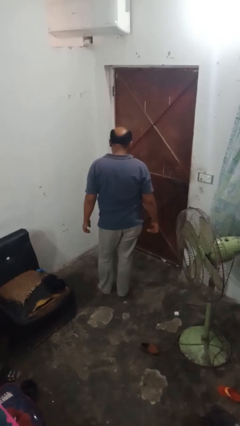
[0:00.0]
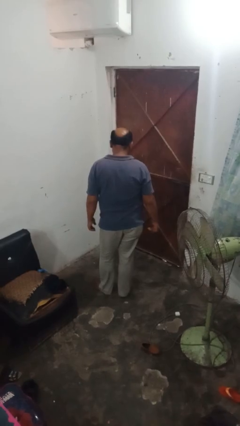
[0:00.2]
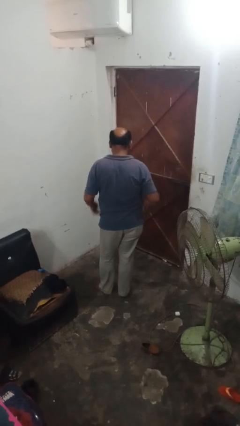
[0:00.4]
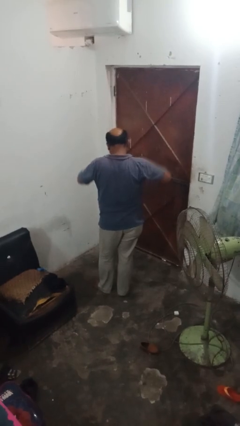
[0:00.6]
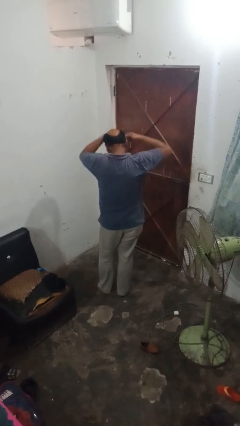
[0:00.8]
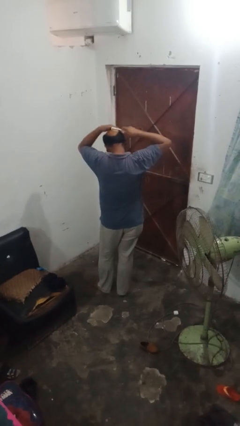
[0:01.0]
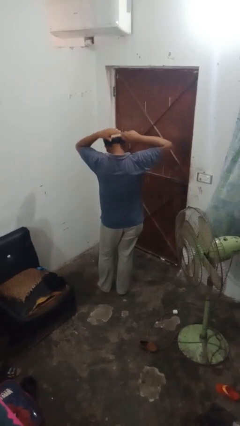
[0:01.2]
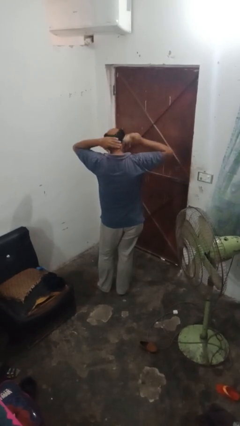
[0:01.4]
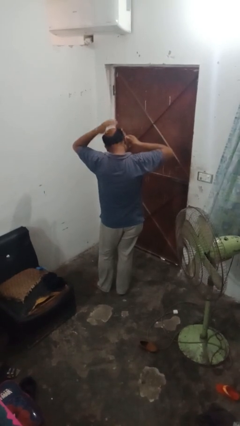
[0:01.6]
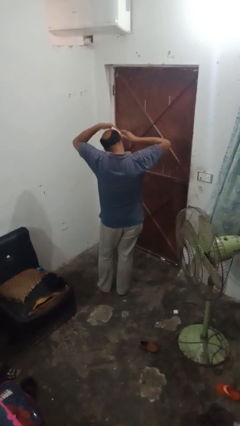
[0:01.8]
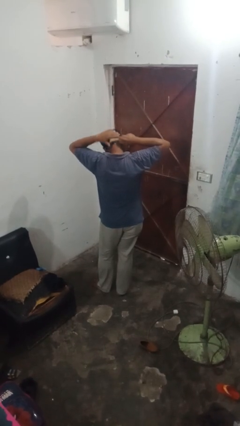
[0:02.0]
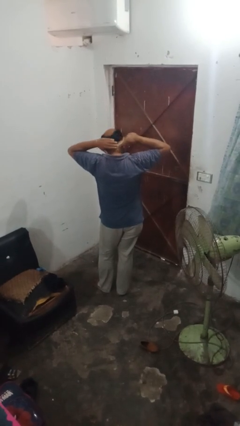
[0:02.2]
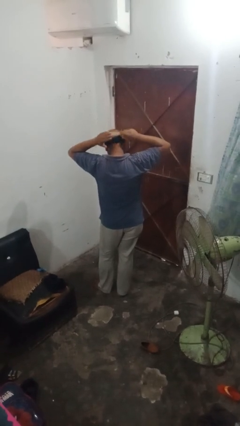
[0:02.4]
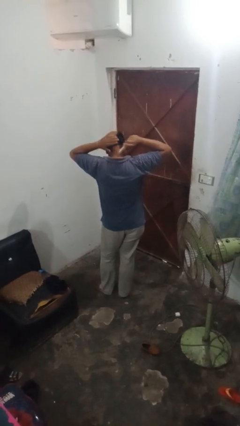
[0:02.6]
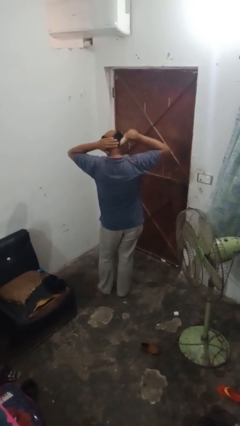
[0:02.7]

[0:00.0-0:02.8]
person brushes hair

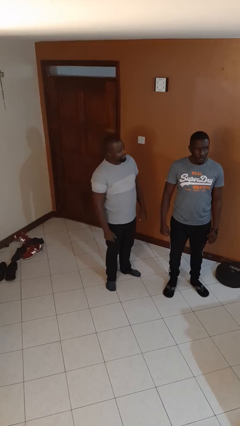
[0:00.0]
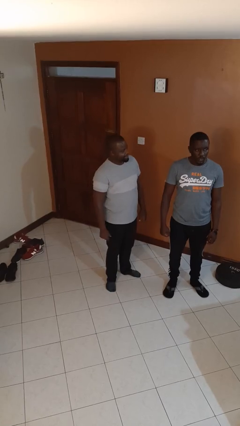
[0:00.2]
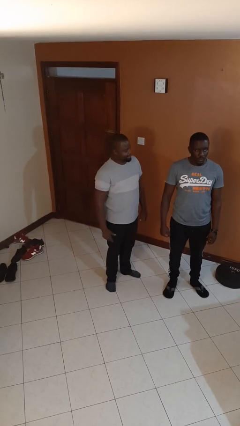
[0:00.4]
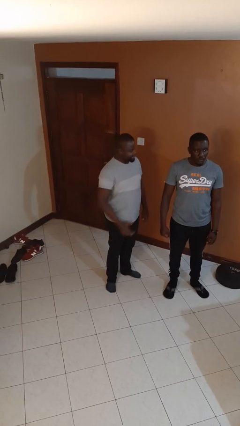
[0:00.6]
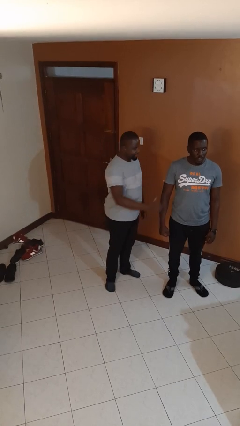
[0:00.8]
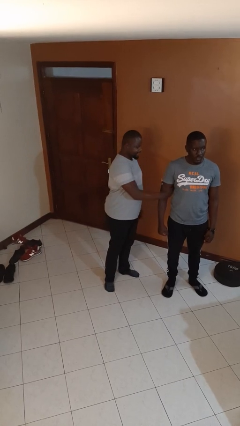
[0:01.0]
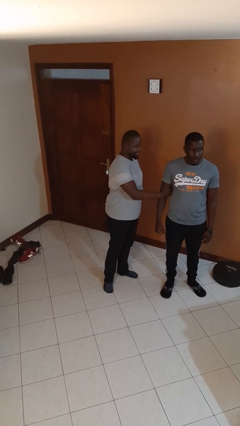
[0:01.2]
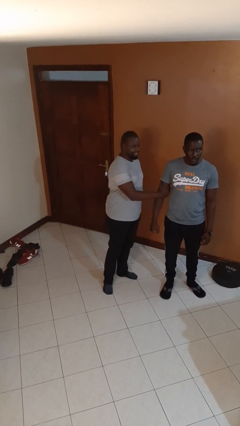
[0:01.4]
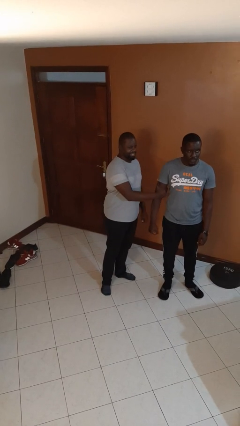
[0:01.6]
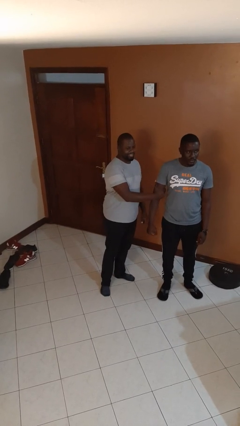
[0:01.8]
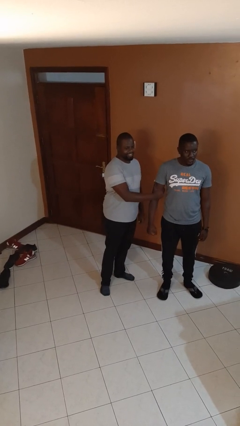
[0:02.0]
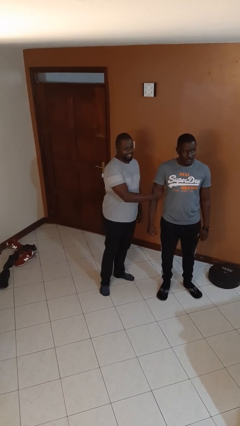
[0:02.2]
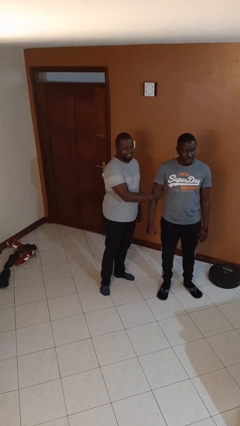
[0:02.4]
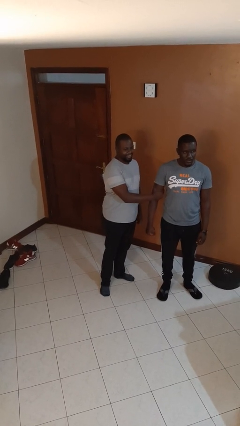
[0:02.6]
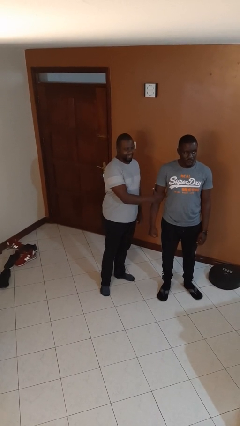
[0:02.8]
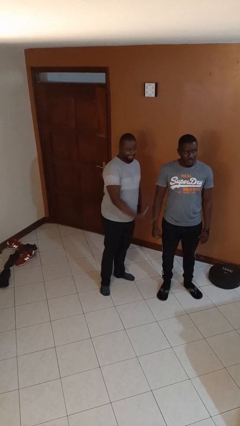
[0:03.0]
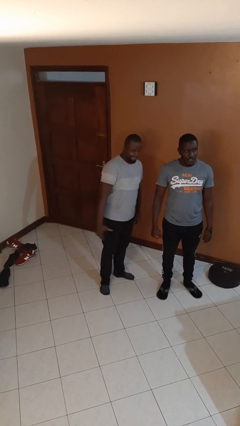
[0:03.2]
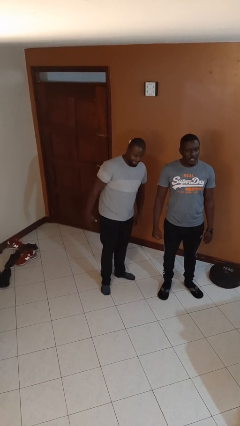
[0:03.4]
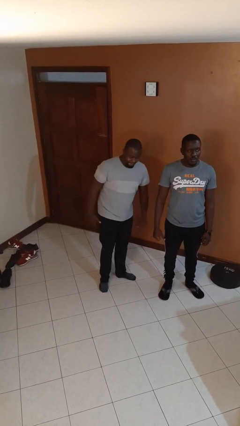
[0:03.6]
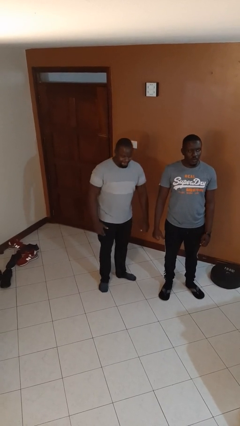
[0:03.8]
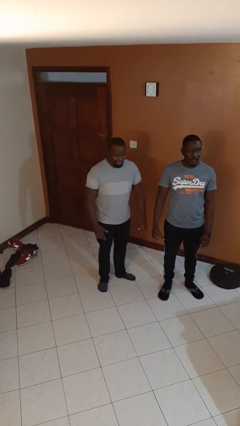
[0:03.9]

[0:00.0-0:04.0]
person grabs person by bicep

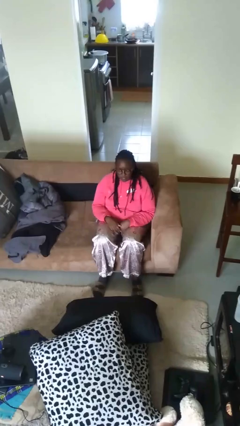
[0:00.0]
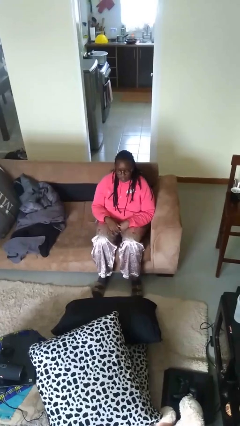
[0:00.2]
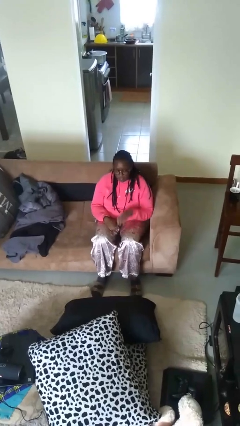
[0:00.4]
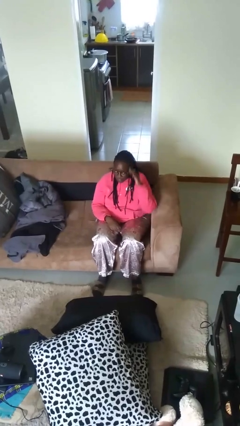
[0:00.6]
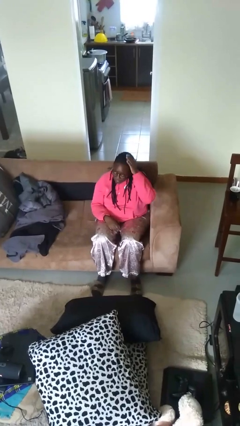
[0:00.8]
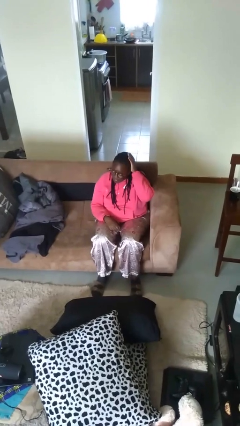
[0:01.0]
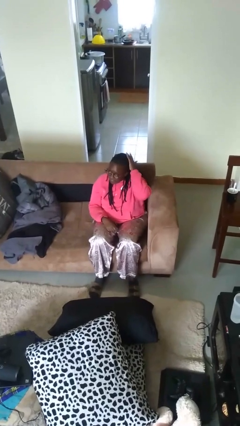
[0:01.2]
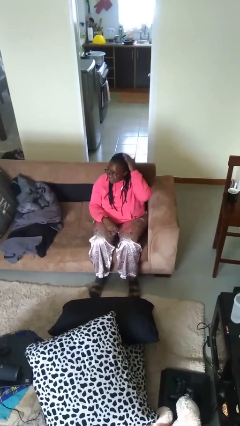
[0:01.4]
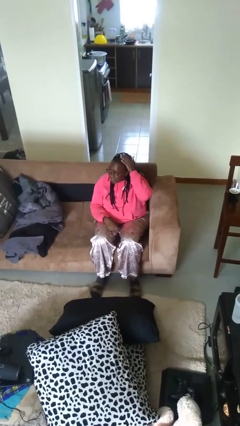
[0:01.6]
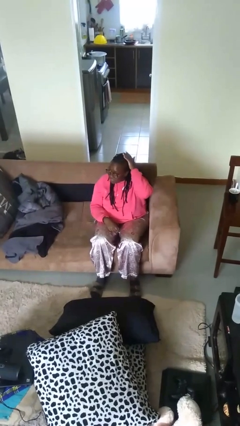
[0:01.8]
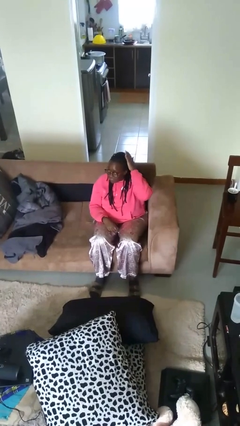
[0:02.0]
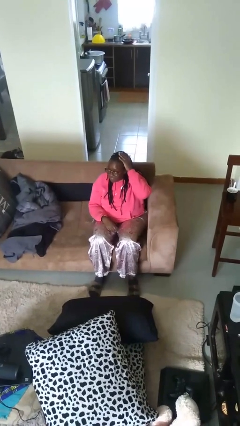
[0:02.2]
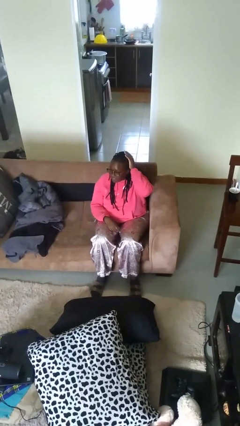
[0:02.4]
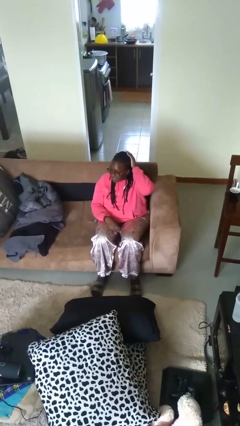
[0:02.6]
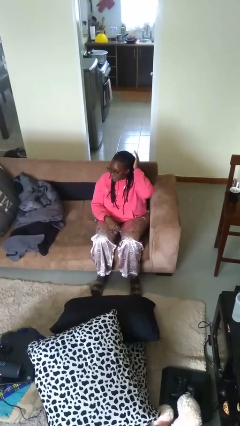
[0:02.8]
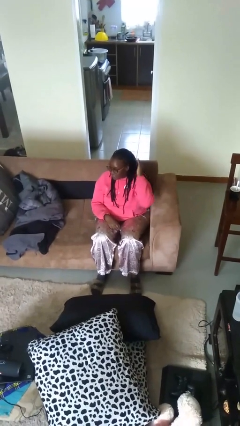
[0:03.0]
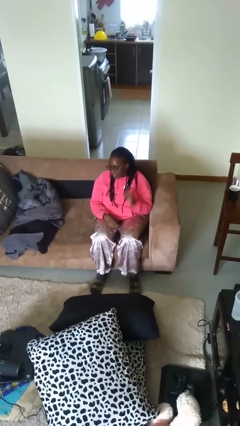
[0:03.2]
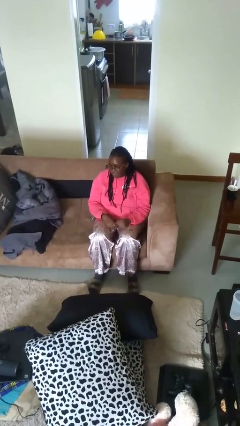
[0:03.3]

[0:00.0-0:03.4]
person strokes hair

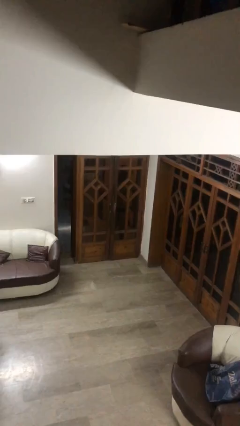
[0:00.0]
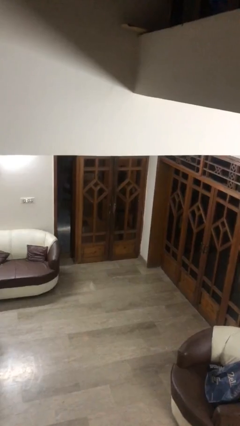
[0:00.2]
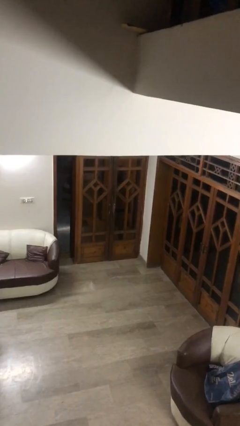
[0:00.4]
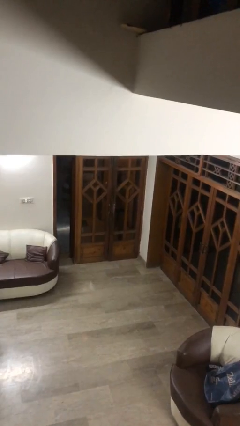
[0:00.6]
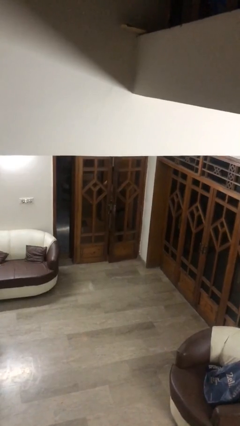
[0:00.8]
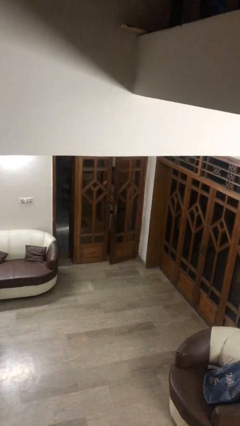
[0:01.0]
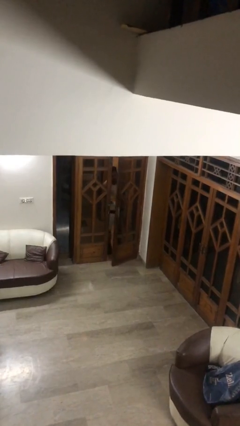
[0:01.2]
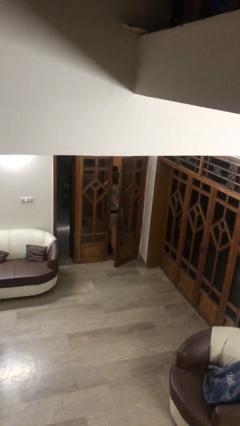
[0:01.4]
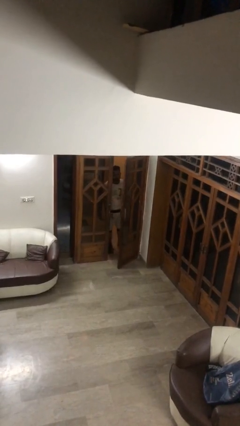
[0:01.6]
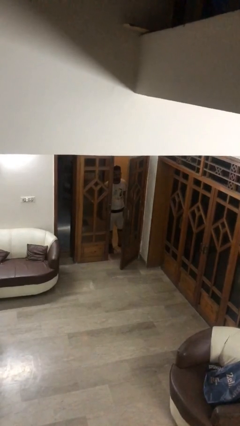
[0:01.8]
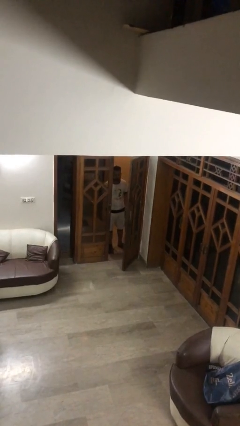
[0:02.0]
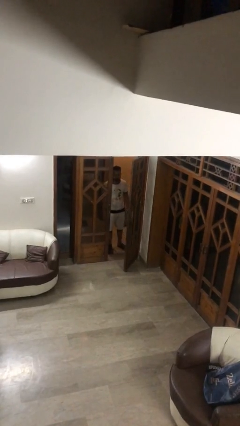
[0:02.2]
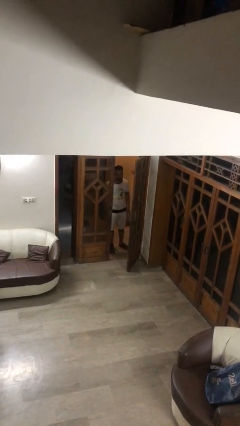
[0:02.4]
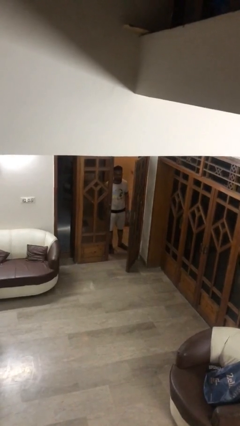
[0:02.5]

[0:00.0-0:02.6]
person opens facility door

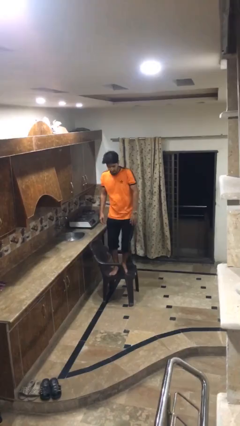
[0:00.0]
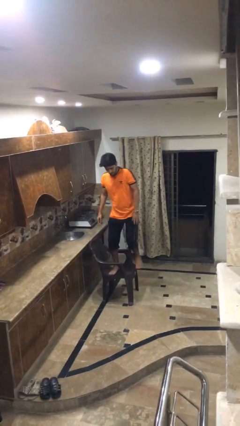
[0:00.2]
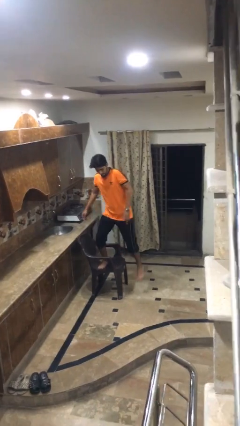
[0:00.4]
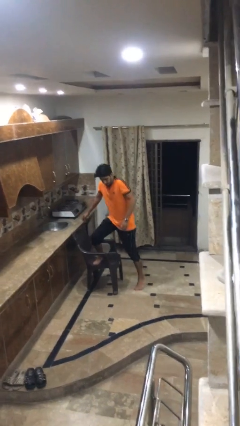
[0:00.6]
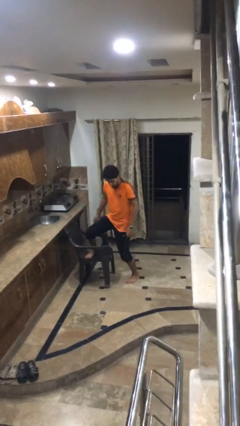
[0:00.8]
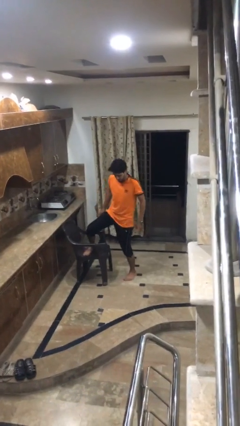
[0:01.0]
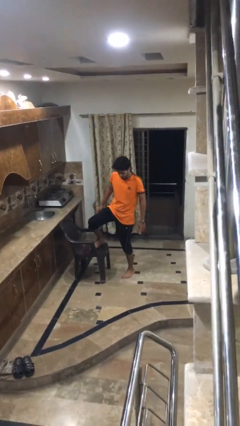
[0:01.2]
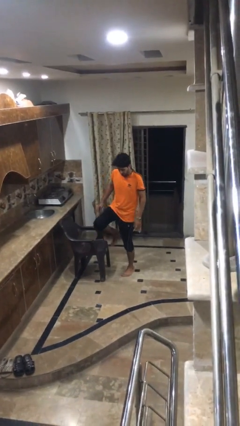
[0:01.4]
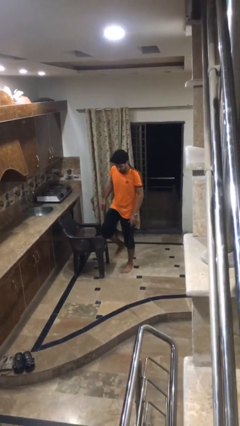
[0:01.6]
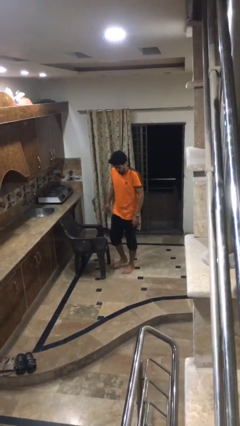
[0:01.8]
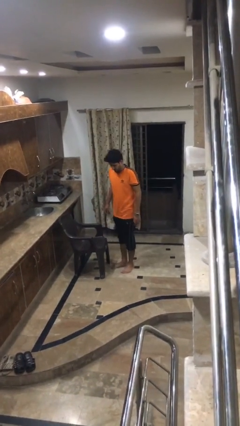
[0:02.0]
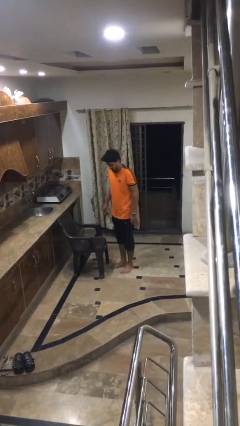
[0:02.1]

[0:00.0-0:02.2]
person climbs off chair

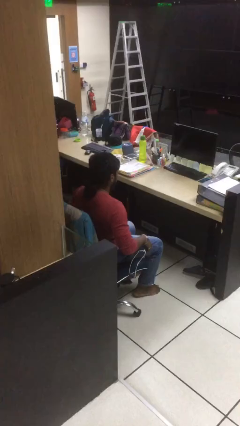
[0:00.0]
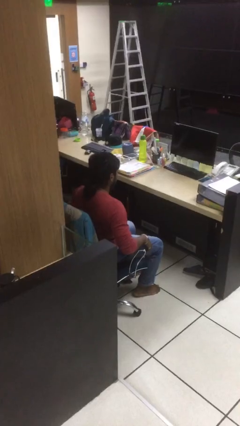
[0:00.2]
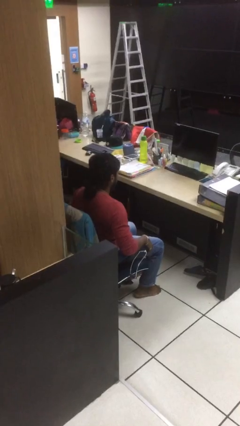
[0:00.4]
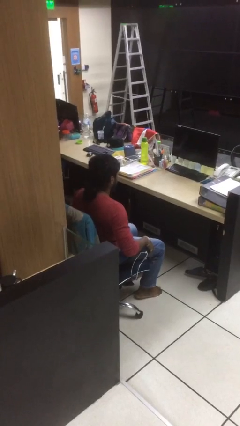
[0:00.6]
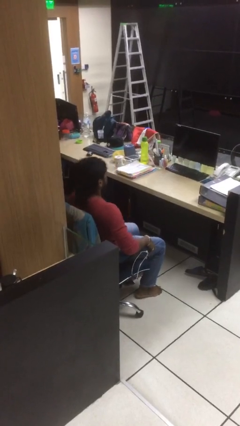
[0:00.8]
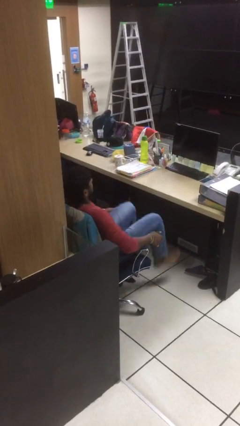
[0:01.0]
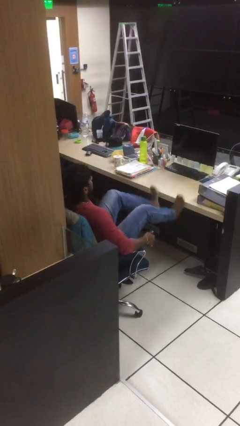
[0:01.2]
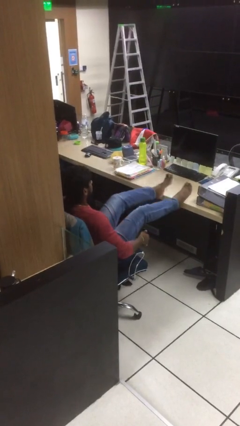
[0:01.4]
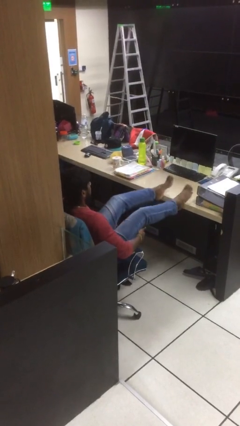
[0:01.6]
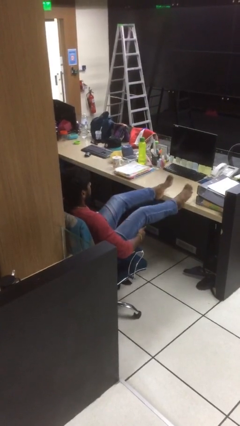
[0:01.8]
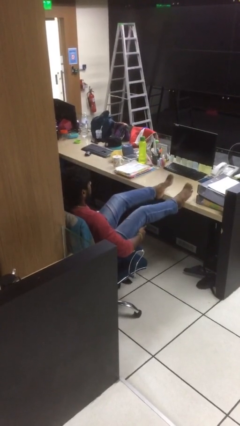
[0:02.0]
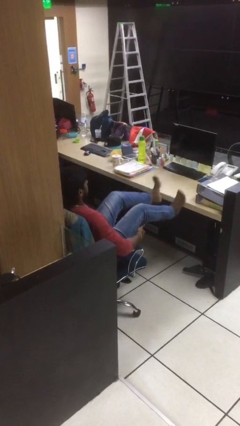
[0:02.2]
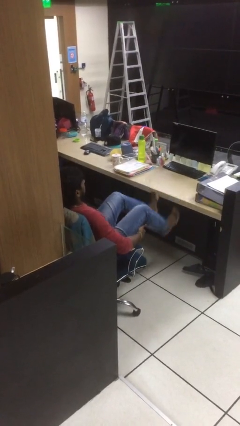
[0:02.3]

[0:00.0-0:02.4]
person puts feet up
